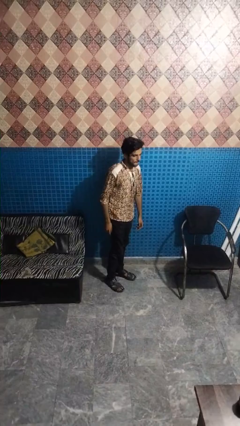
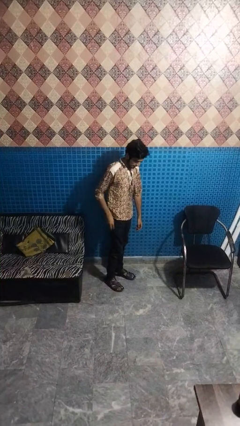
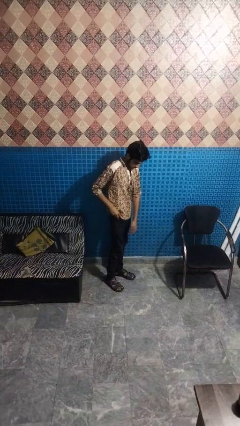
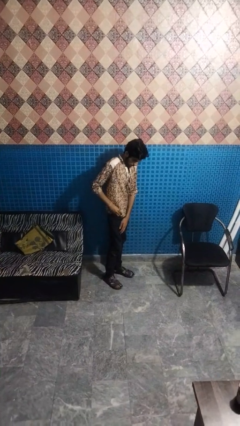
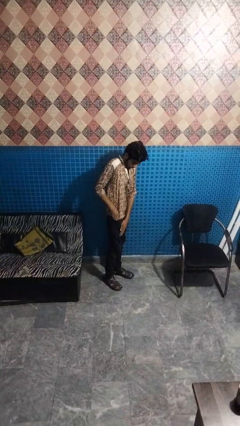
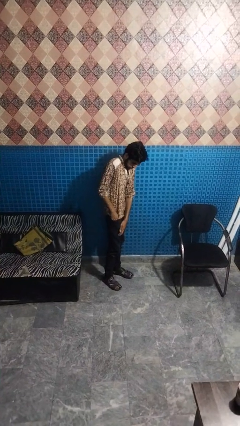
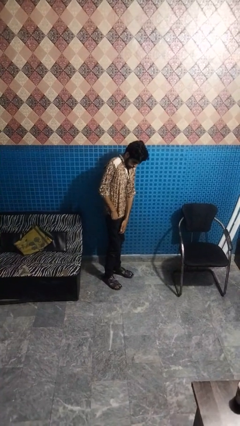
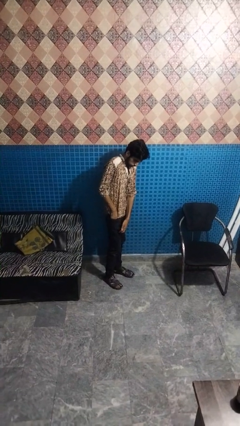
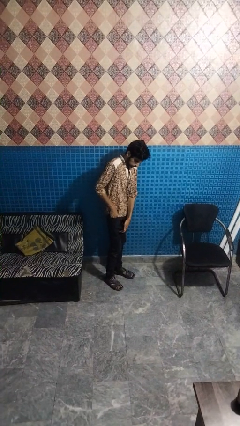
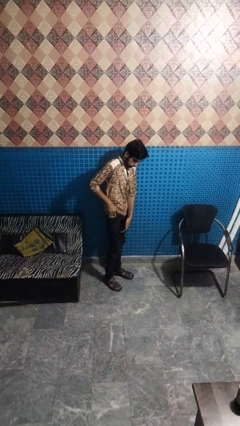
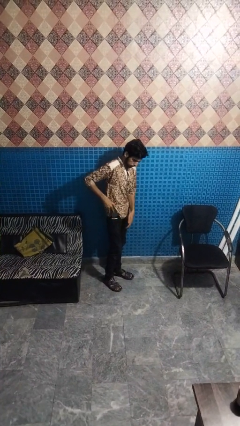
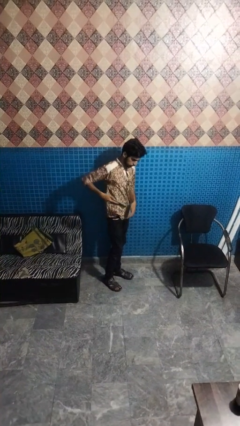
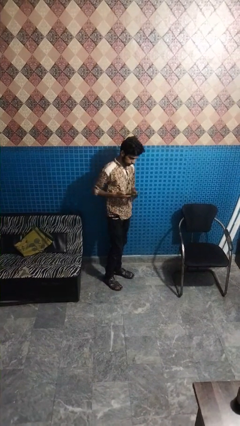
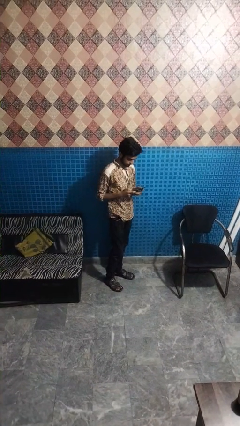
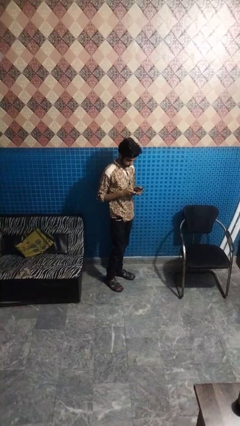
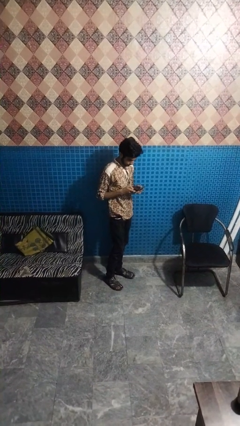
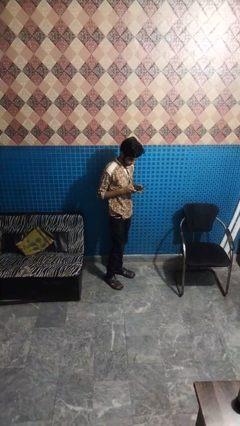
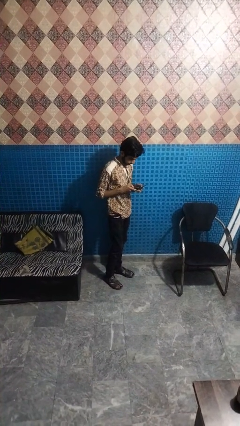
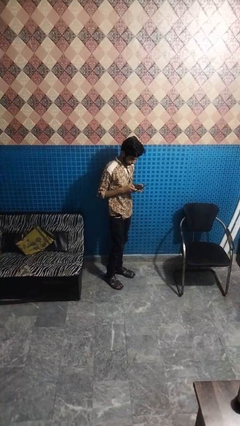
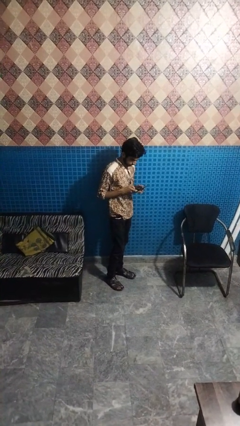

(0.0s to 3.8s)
person takes phone from pocket

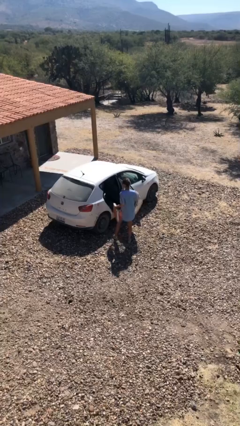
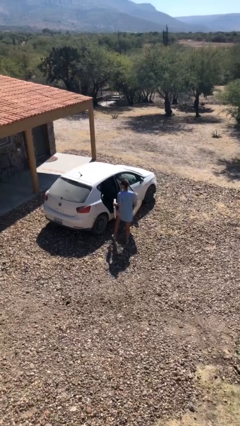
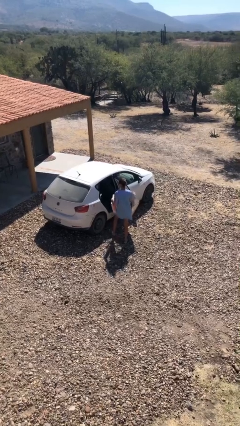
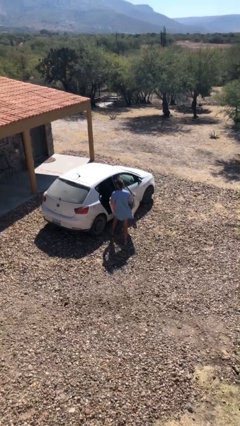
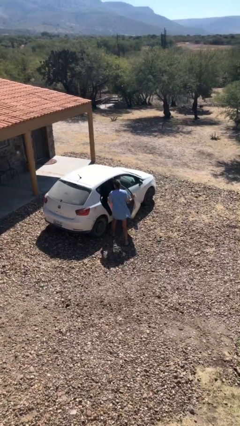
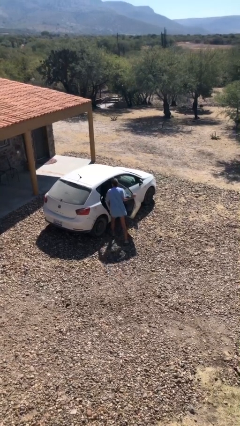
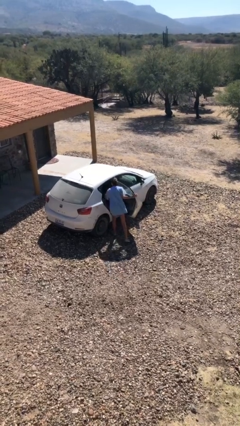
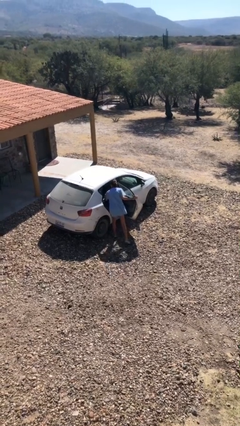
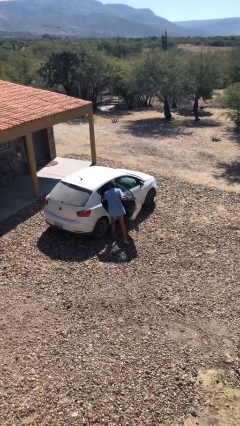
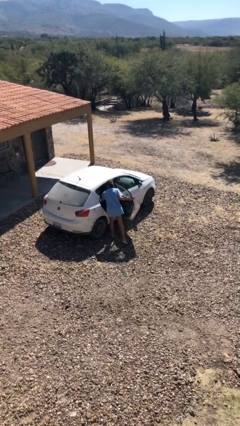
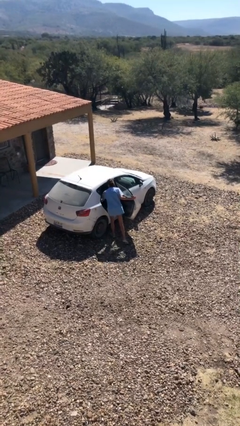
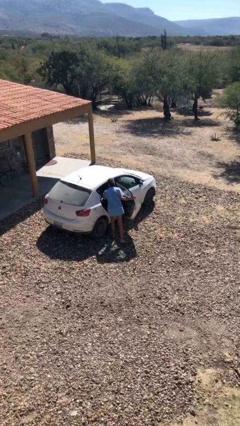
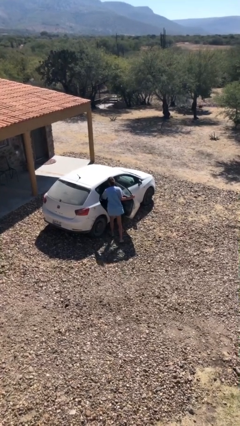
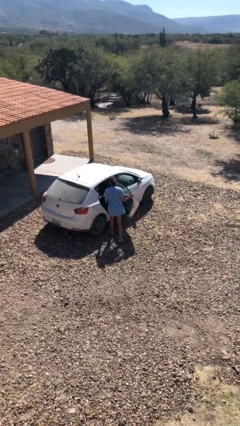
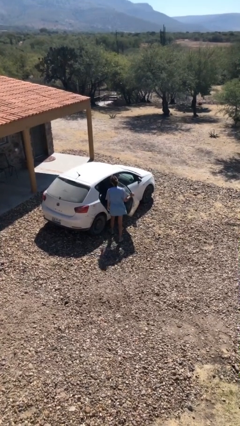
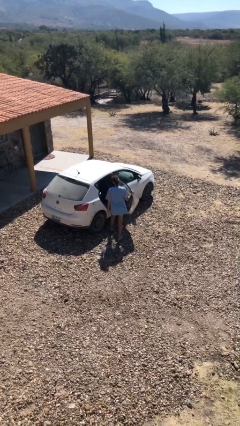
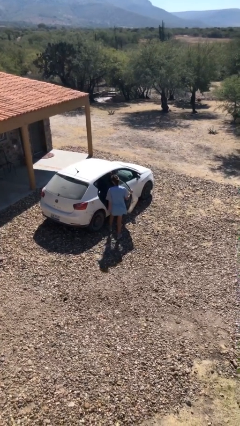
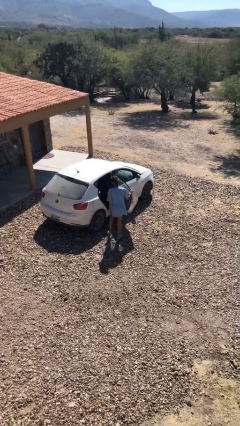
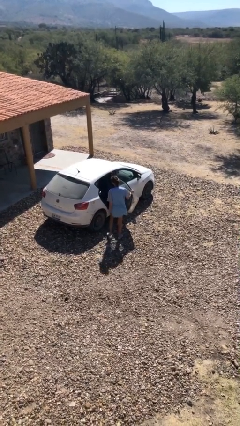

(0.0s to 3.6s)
person loads car

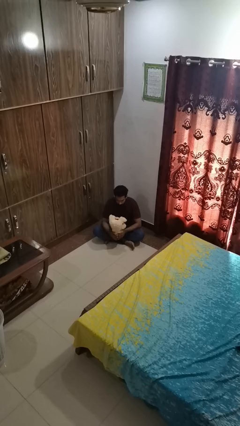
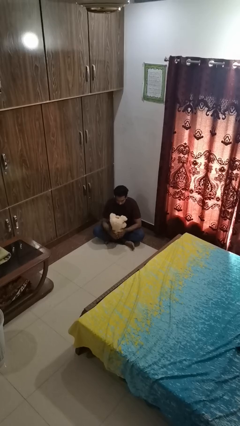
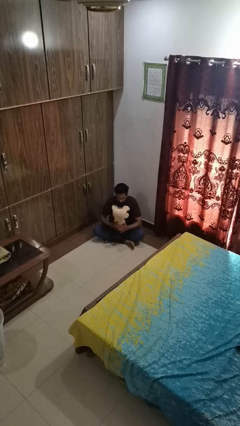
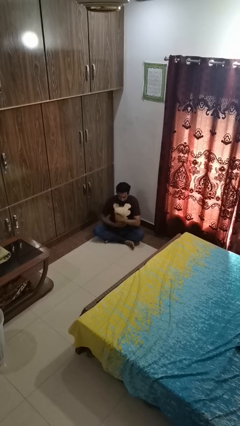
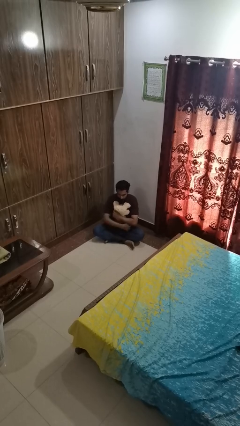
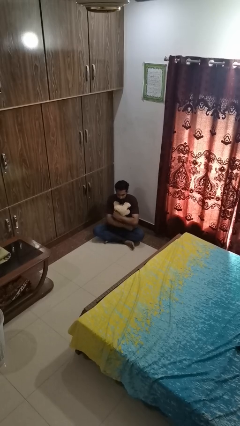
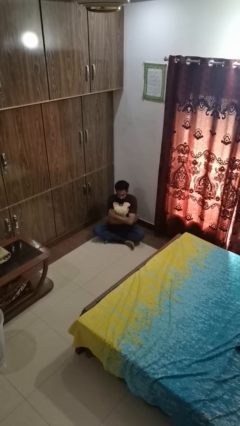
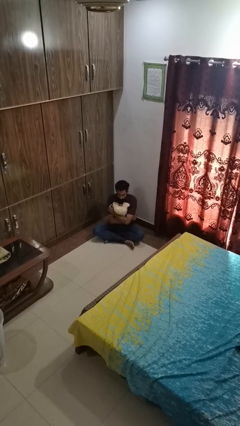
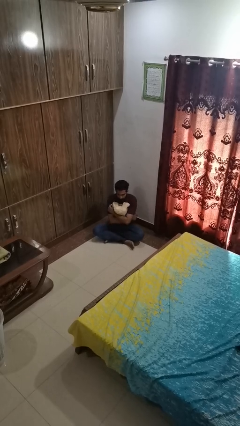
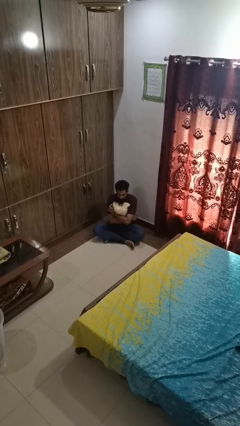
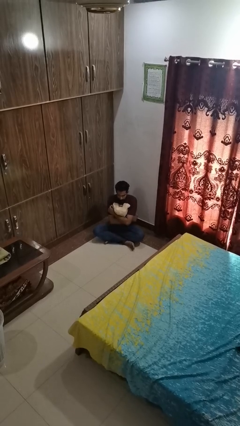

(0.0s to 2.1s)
person hugs stuffed animal

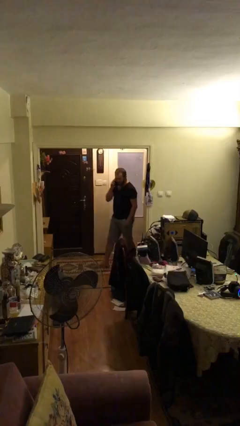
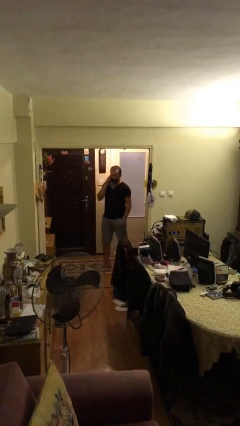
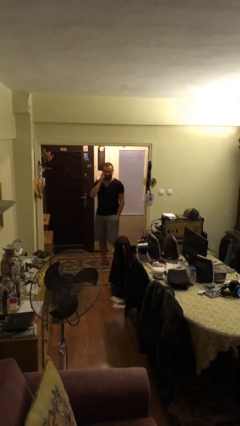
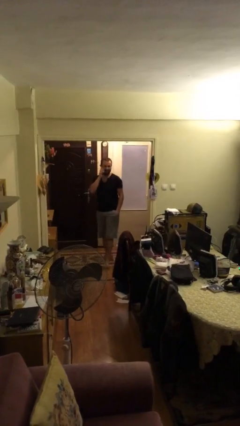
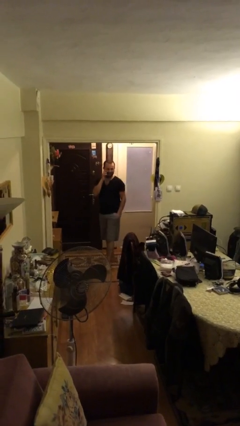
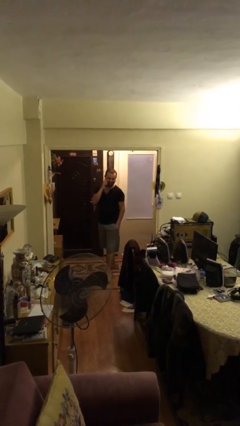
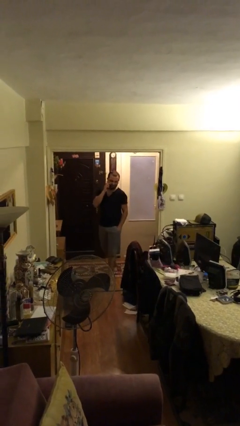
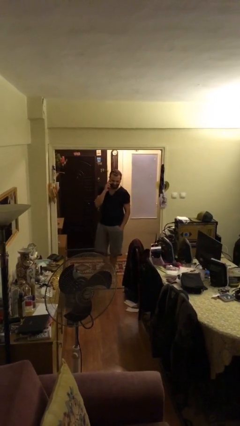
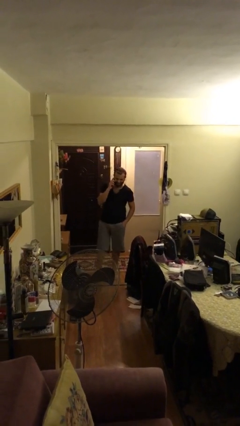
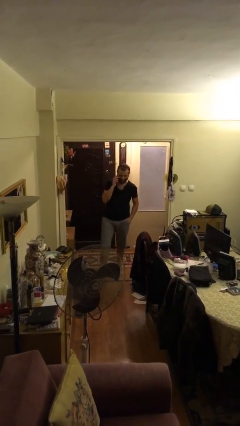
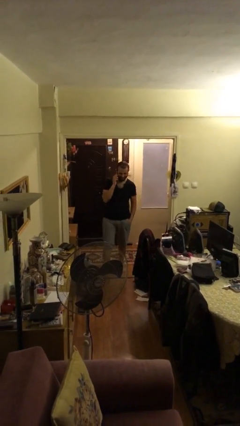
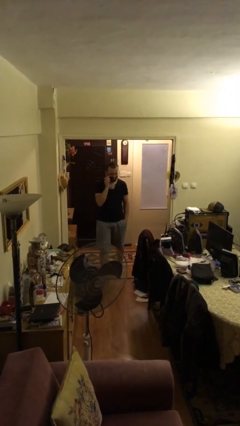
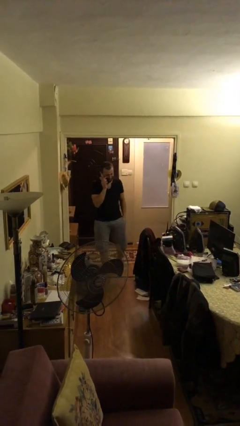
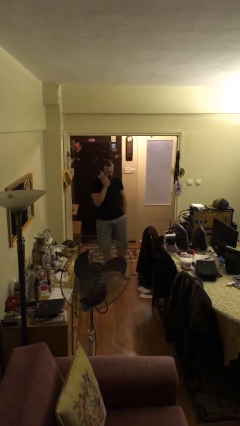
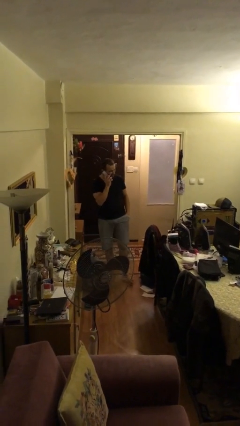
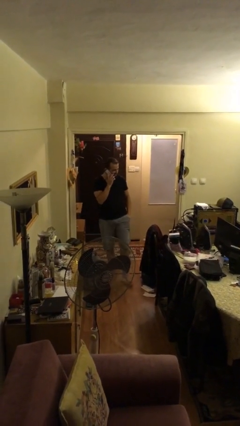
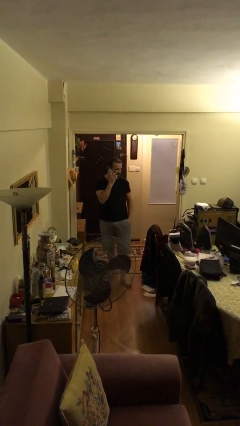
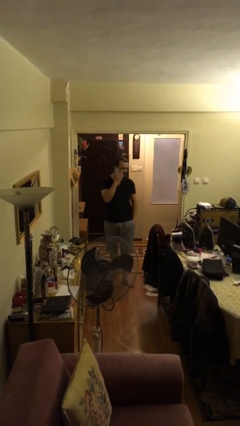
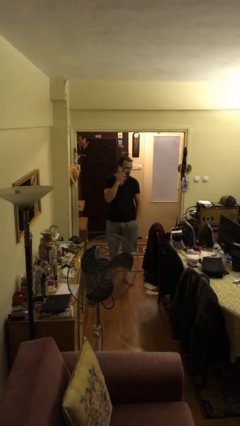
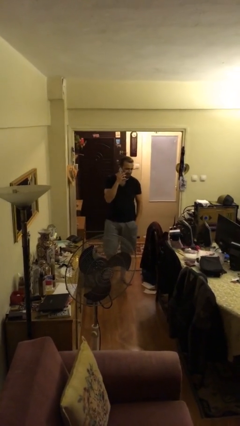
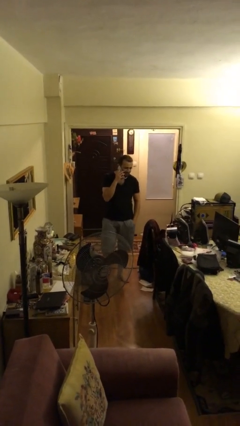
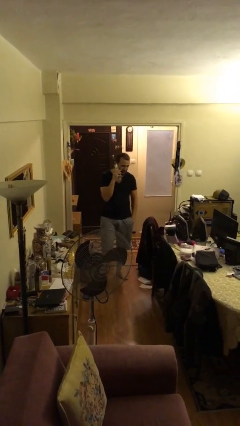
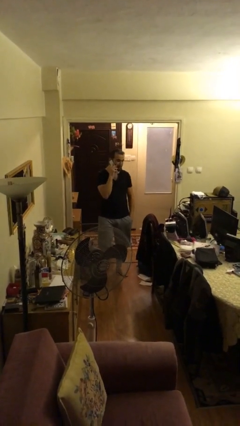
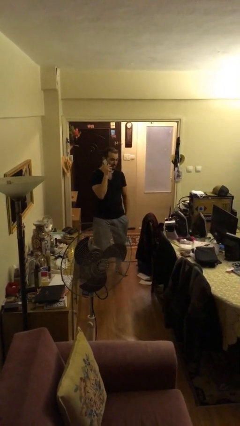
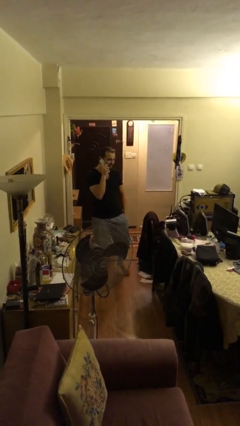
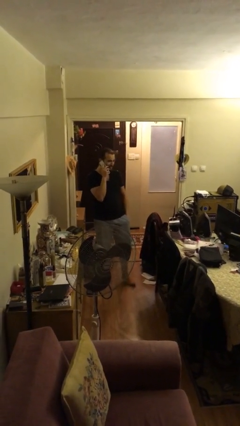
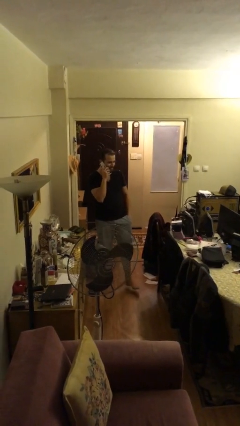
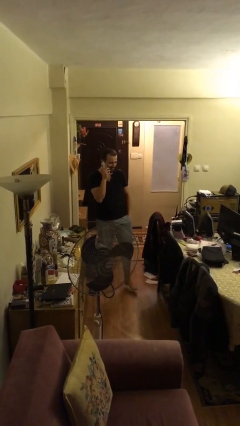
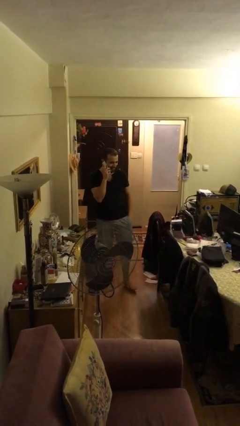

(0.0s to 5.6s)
person enters scene through structure

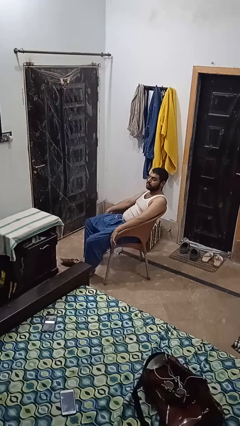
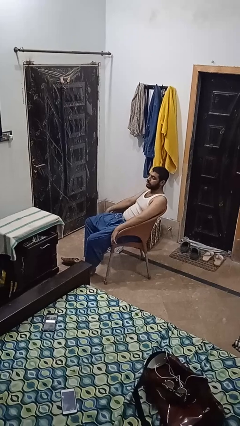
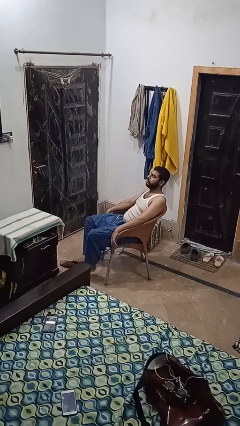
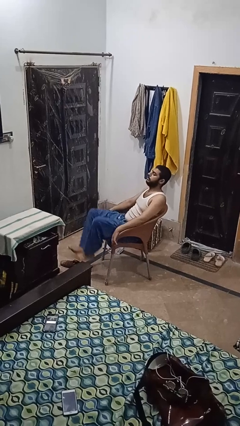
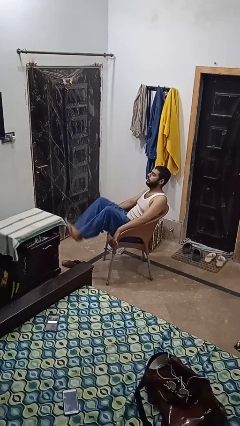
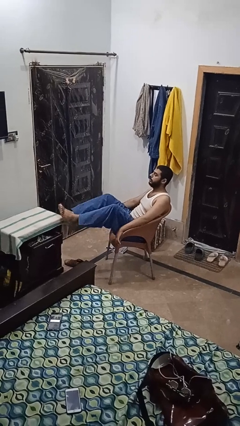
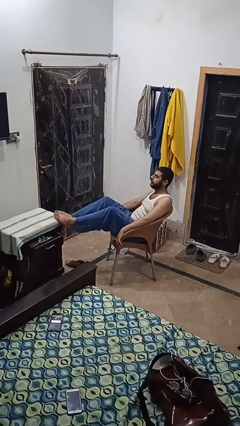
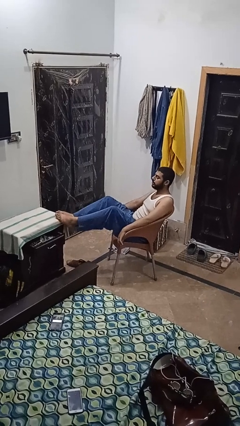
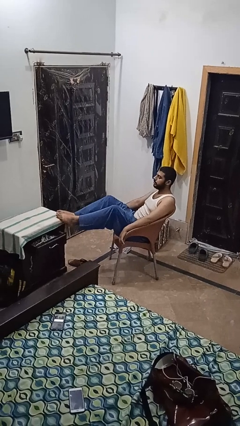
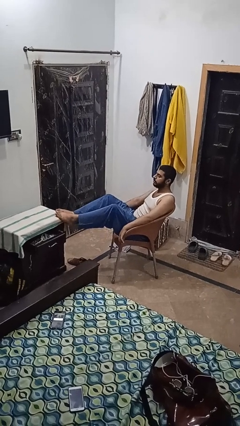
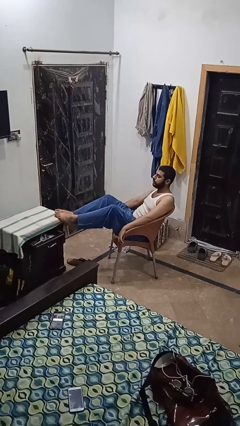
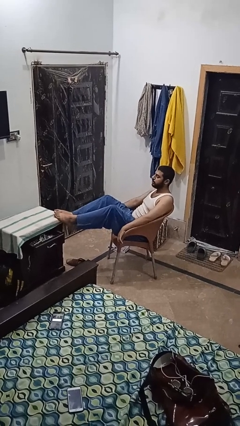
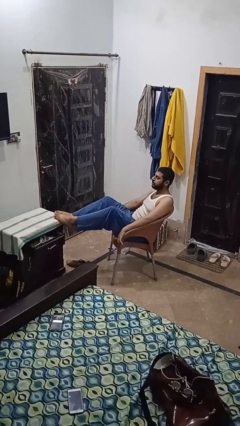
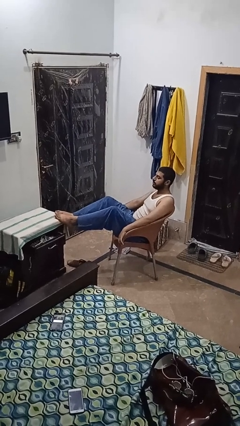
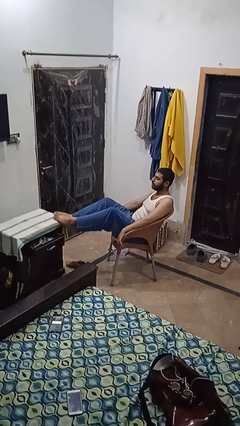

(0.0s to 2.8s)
person puts feet up
